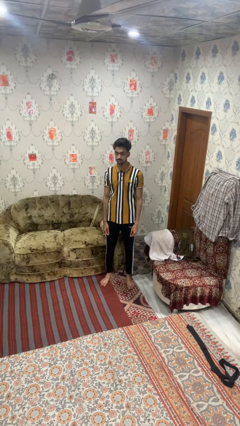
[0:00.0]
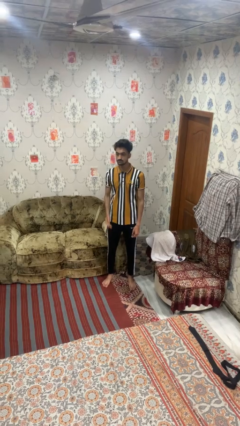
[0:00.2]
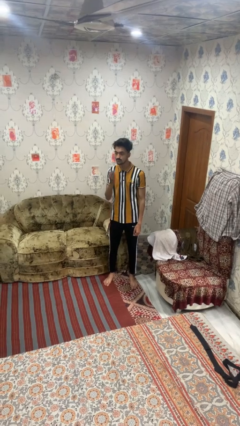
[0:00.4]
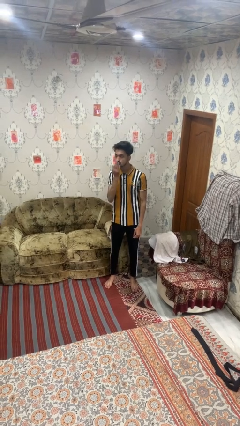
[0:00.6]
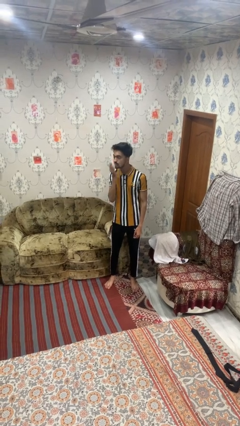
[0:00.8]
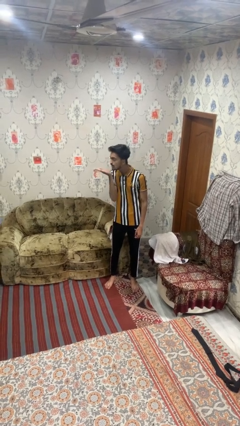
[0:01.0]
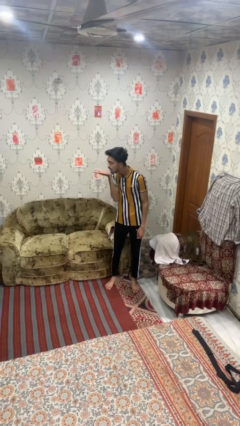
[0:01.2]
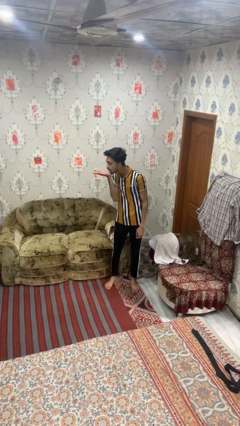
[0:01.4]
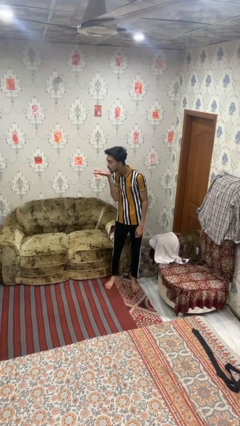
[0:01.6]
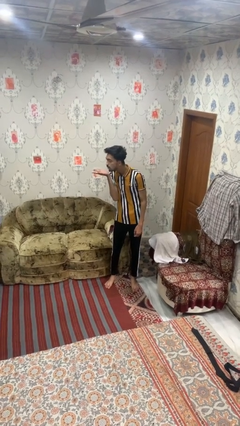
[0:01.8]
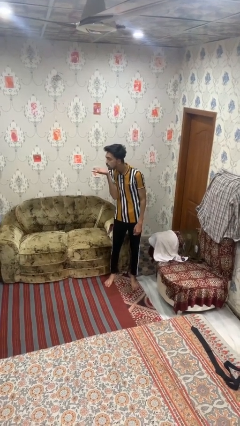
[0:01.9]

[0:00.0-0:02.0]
person gestures blow kiss

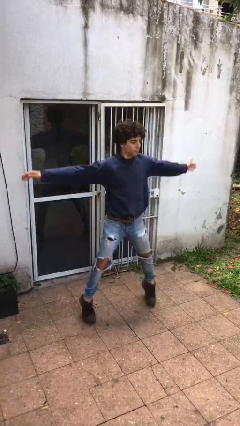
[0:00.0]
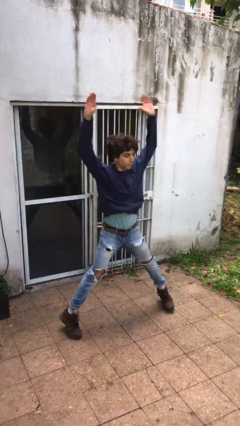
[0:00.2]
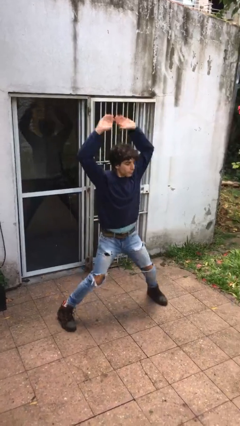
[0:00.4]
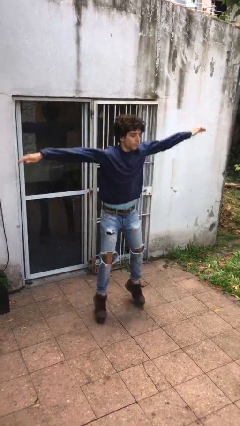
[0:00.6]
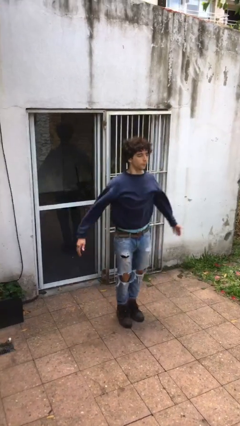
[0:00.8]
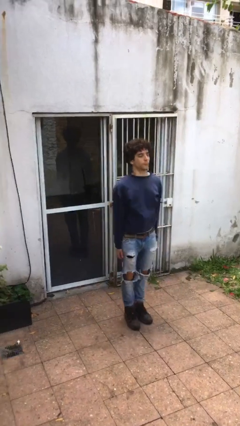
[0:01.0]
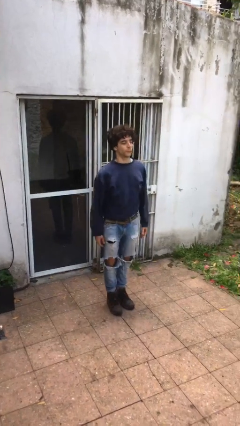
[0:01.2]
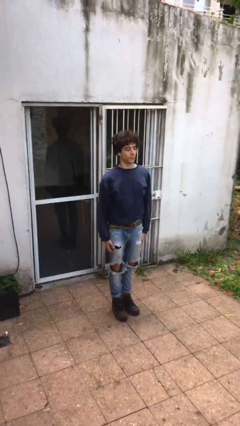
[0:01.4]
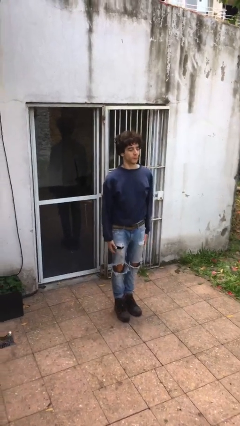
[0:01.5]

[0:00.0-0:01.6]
person exercises with jumping jacks

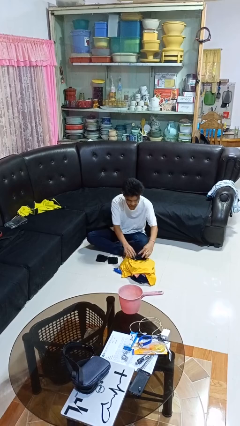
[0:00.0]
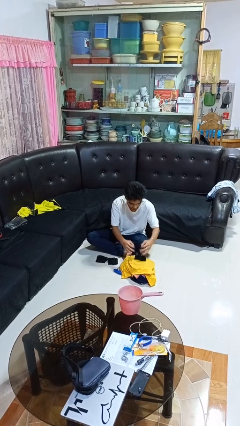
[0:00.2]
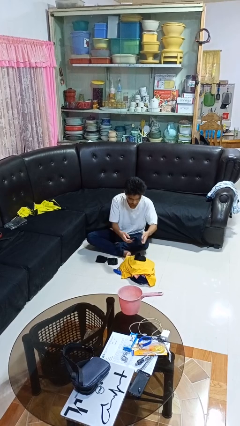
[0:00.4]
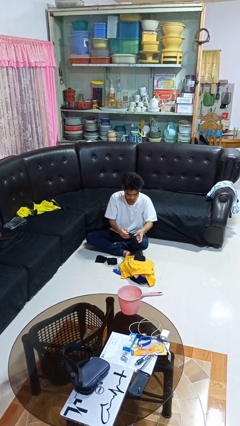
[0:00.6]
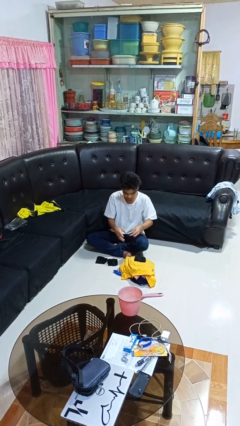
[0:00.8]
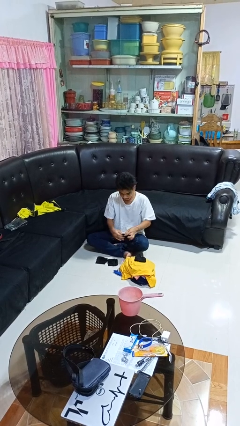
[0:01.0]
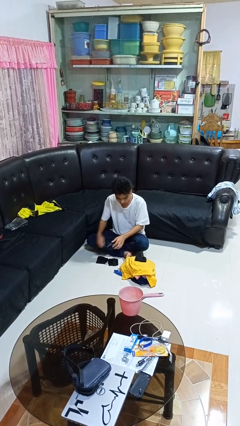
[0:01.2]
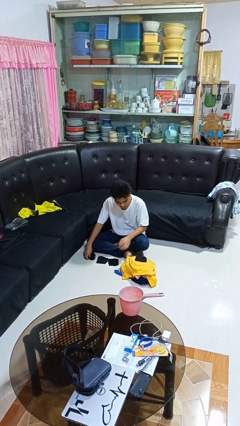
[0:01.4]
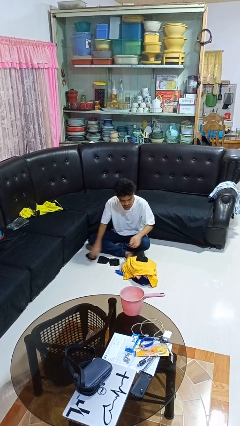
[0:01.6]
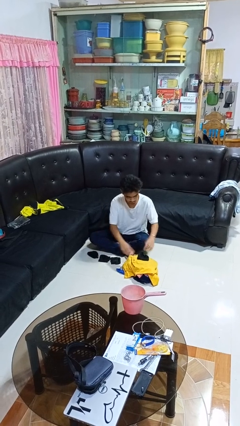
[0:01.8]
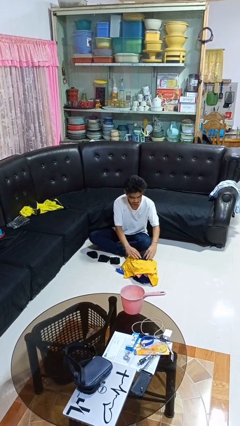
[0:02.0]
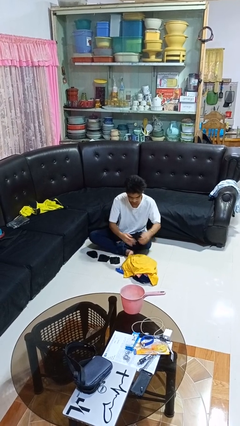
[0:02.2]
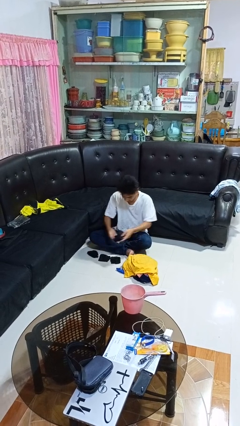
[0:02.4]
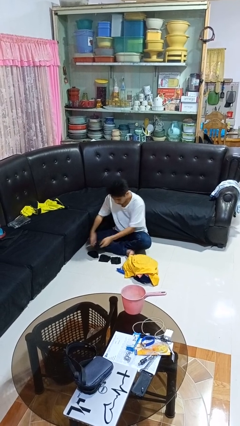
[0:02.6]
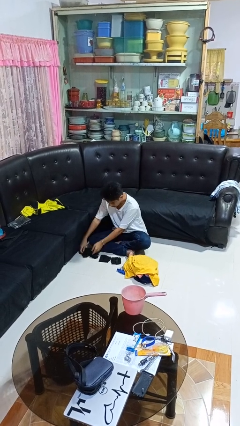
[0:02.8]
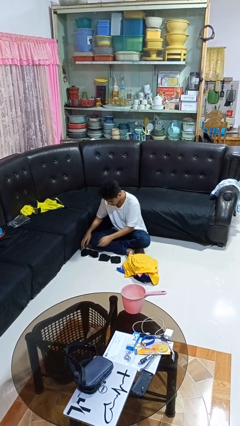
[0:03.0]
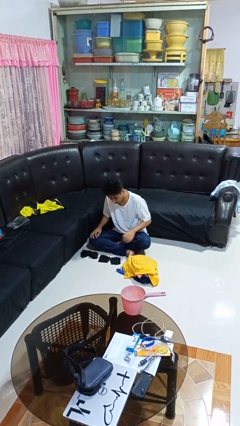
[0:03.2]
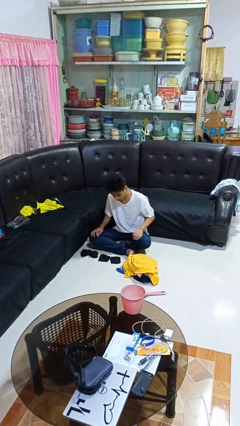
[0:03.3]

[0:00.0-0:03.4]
person folds socks

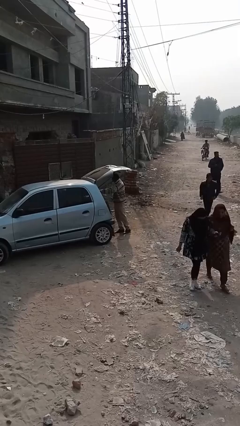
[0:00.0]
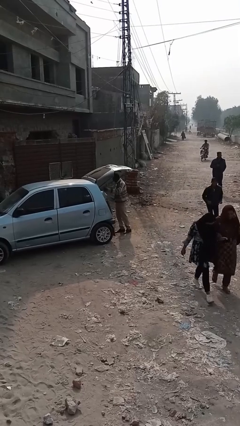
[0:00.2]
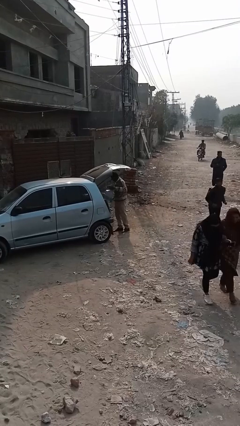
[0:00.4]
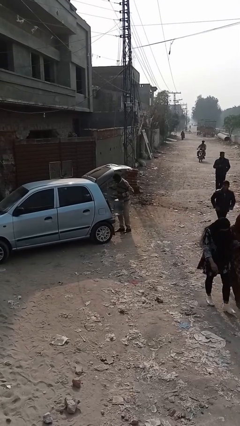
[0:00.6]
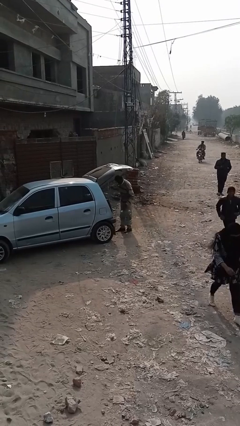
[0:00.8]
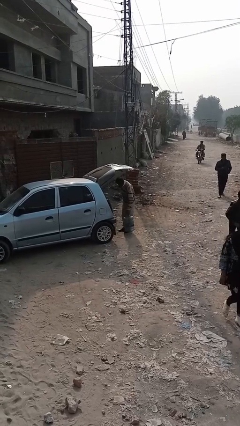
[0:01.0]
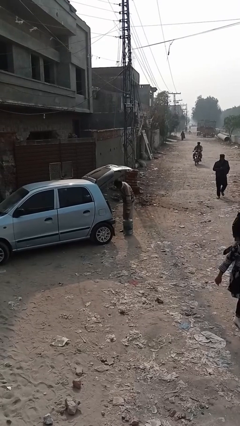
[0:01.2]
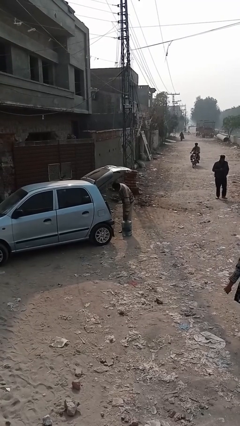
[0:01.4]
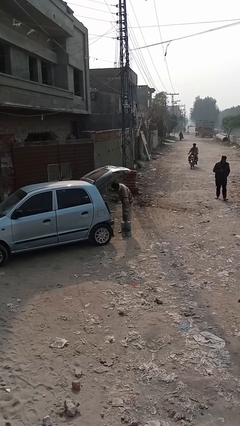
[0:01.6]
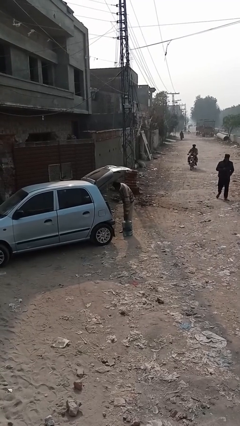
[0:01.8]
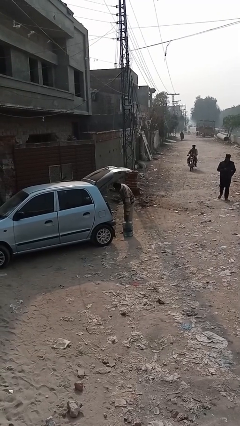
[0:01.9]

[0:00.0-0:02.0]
person unloads car

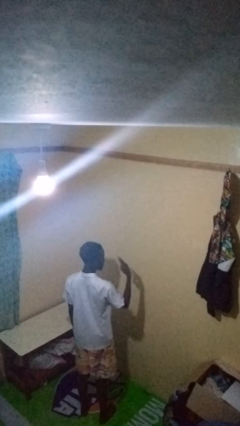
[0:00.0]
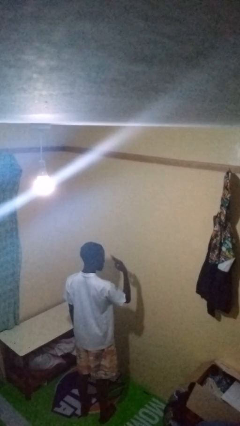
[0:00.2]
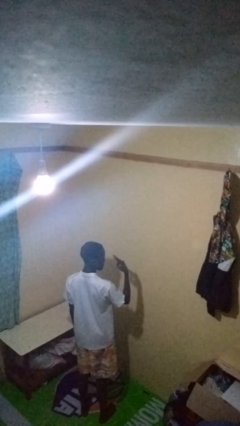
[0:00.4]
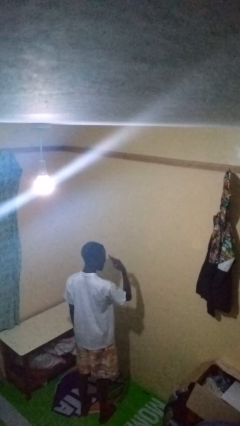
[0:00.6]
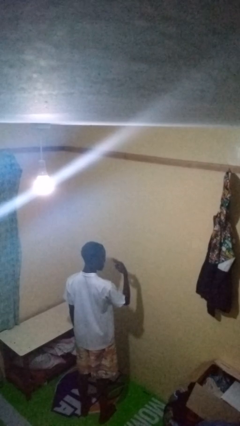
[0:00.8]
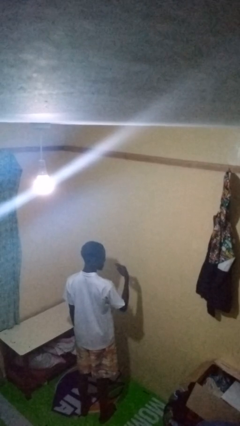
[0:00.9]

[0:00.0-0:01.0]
person gestures watch closely

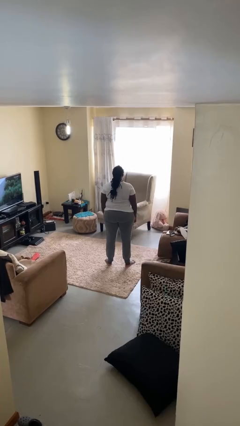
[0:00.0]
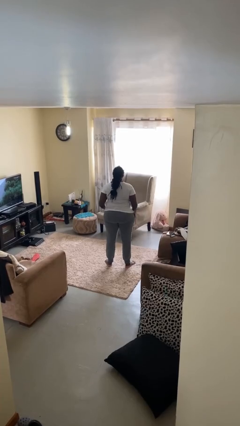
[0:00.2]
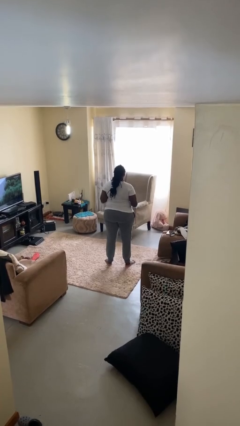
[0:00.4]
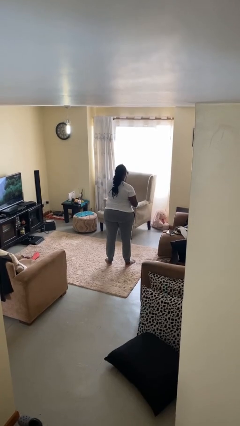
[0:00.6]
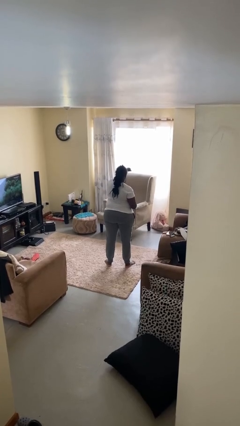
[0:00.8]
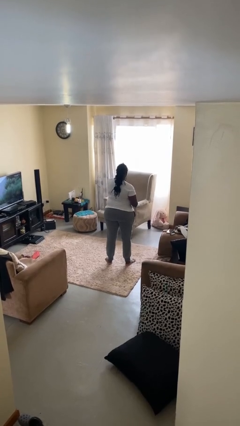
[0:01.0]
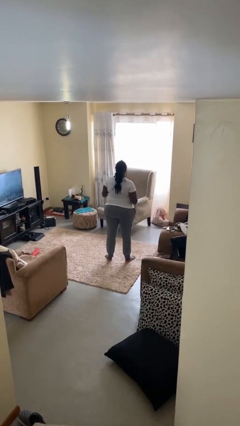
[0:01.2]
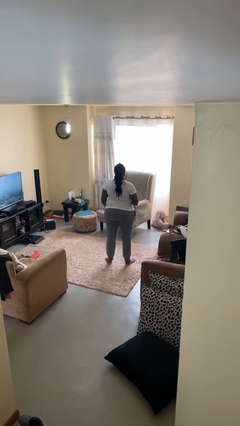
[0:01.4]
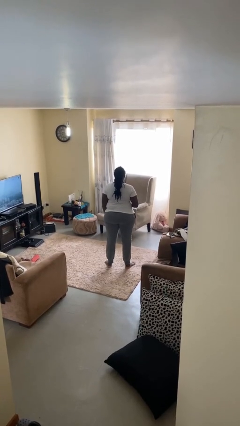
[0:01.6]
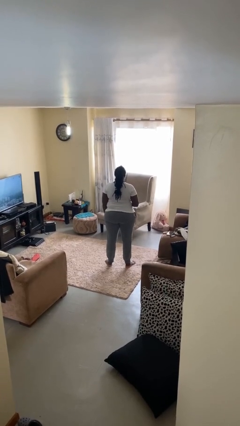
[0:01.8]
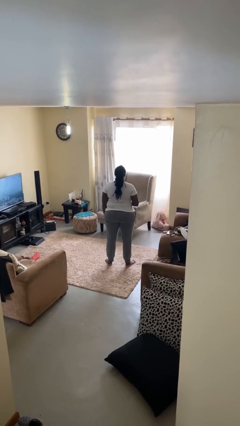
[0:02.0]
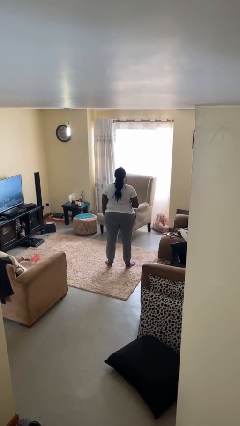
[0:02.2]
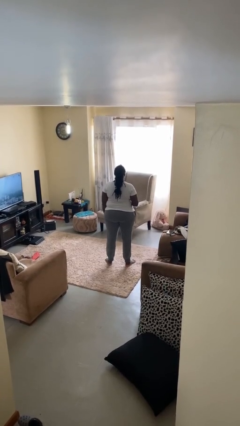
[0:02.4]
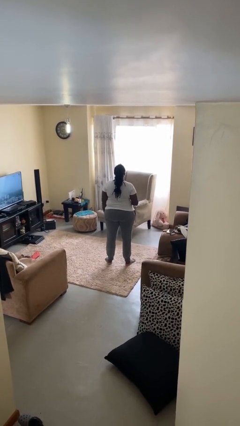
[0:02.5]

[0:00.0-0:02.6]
person punches

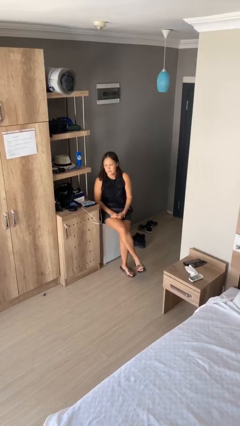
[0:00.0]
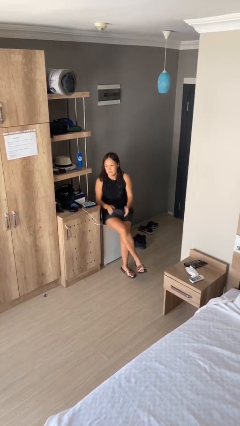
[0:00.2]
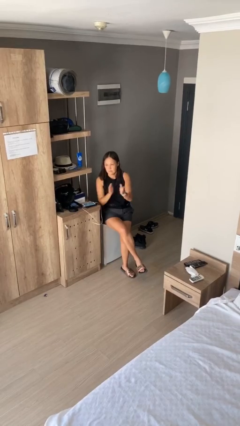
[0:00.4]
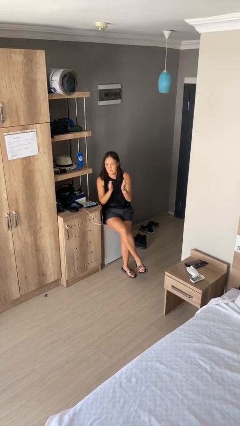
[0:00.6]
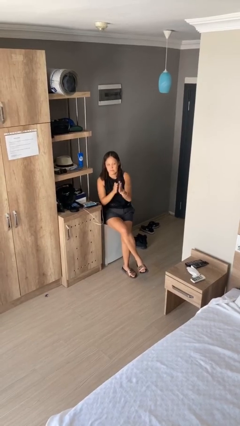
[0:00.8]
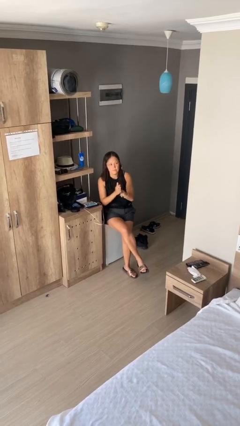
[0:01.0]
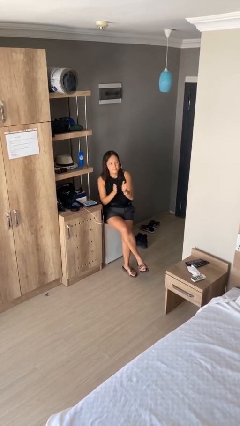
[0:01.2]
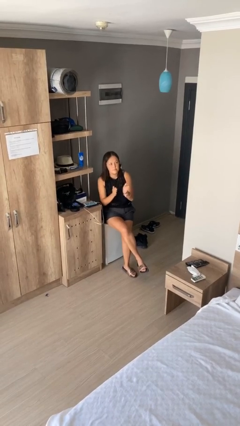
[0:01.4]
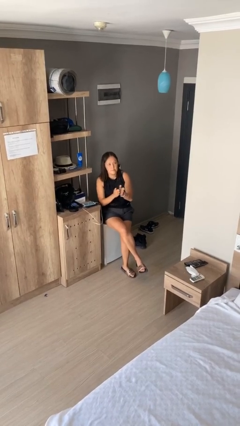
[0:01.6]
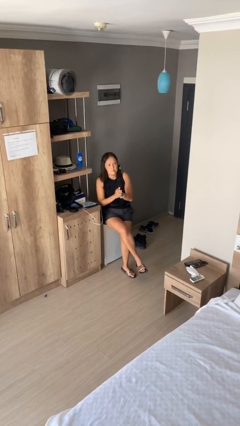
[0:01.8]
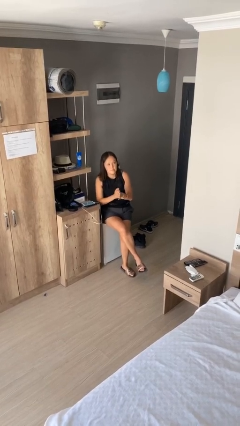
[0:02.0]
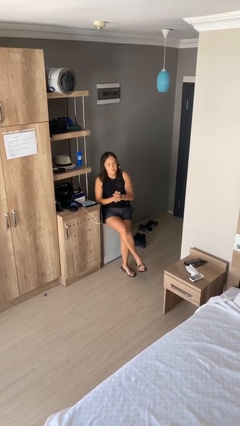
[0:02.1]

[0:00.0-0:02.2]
person claps hands

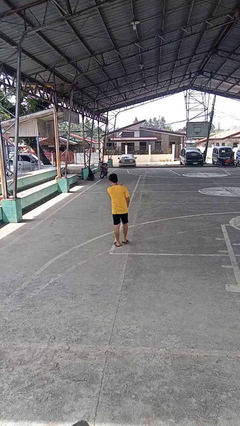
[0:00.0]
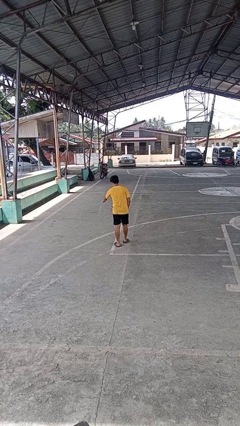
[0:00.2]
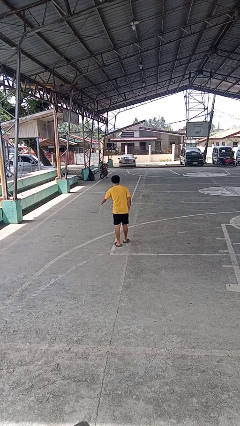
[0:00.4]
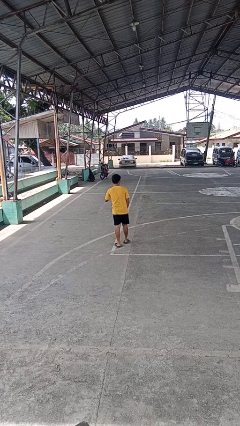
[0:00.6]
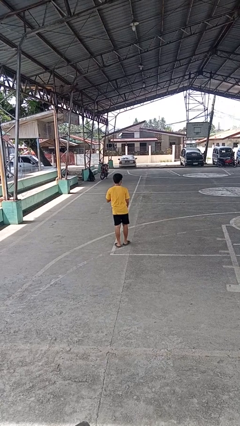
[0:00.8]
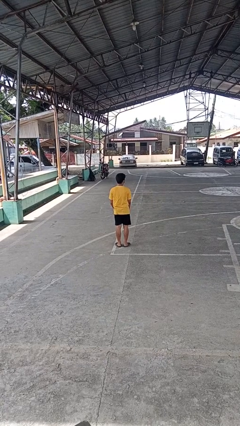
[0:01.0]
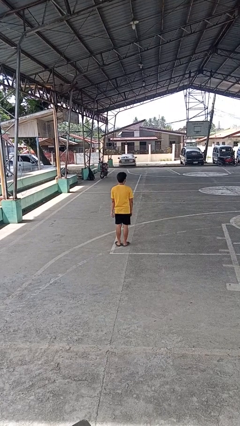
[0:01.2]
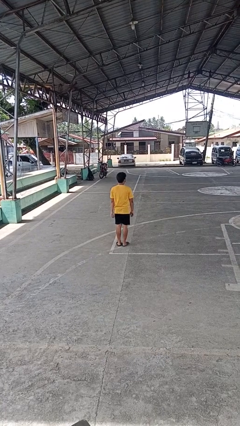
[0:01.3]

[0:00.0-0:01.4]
person karate chop

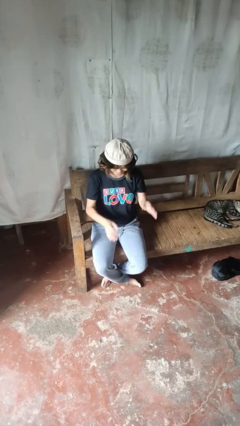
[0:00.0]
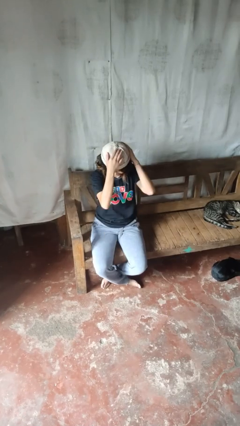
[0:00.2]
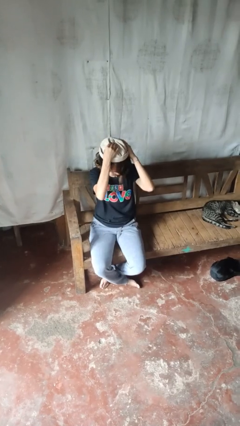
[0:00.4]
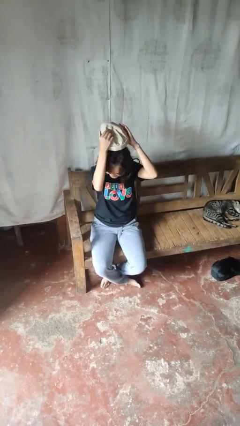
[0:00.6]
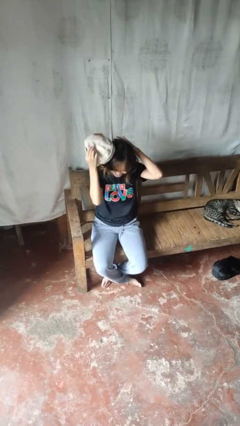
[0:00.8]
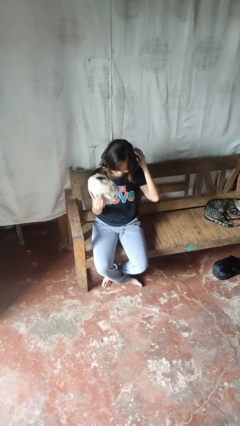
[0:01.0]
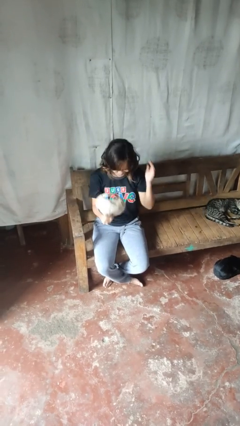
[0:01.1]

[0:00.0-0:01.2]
person takes off hat
